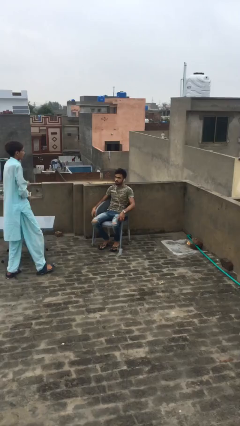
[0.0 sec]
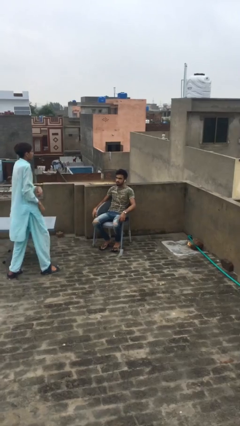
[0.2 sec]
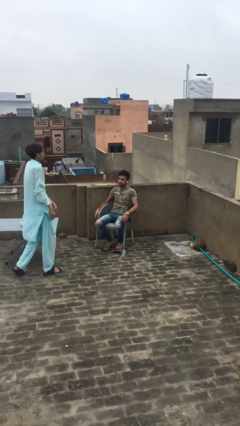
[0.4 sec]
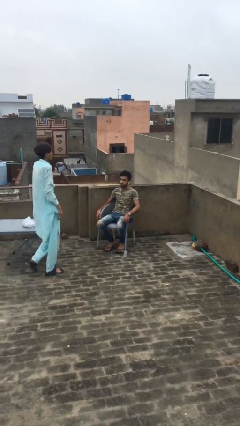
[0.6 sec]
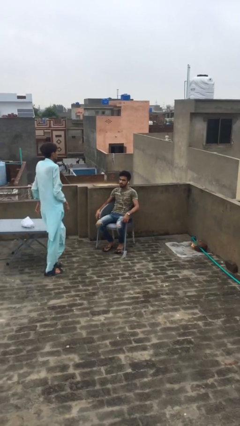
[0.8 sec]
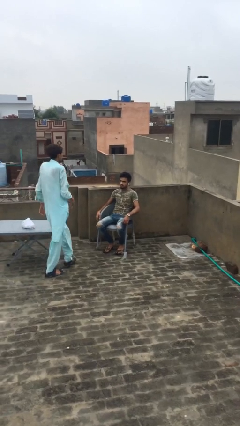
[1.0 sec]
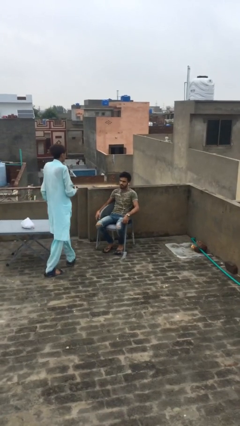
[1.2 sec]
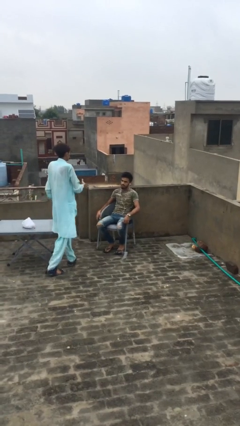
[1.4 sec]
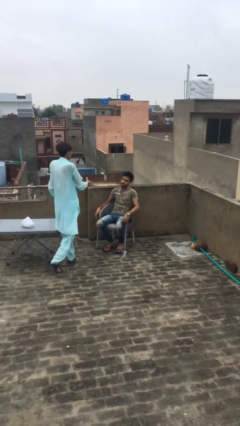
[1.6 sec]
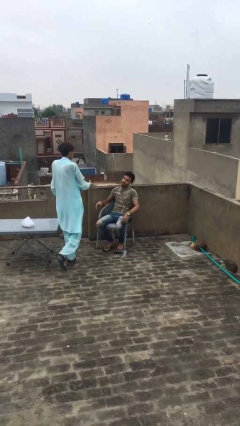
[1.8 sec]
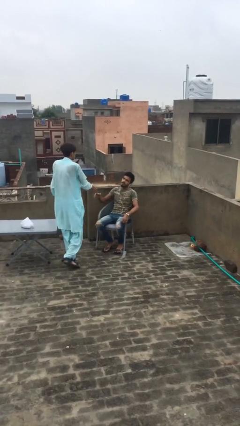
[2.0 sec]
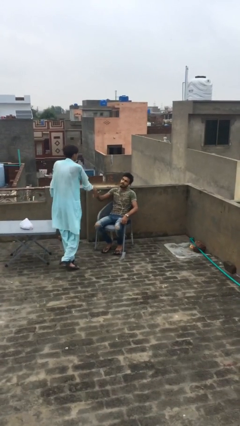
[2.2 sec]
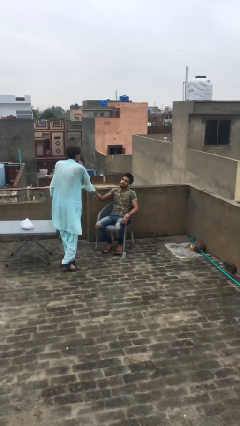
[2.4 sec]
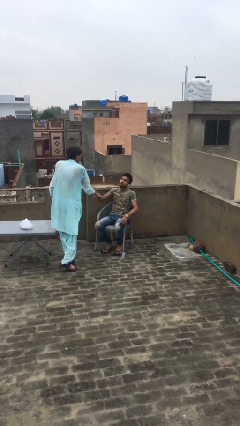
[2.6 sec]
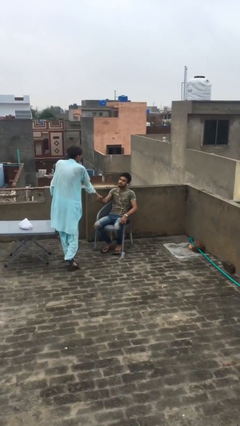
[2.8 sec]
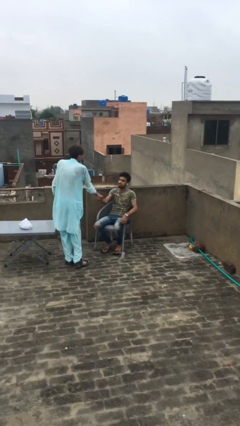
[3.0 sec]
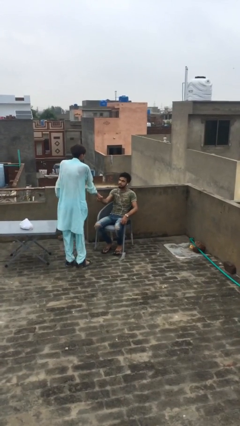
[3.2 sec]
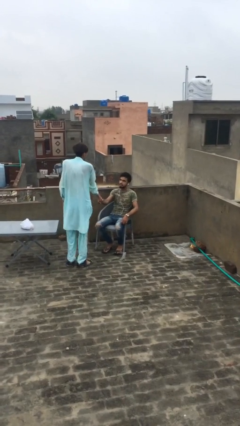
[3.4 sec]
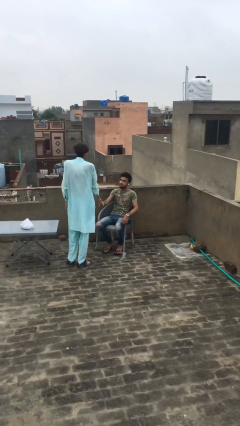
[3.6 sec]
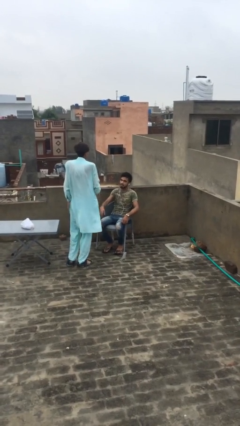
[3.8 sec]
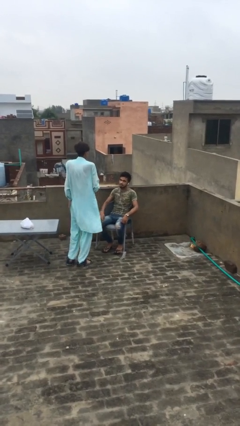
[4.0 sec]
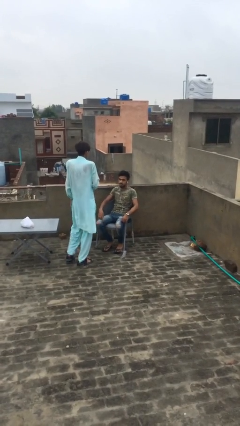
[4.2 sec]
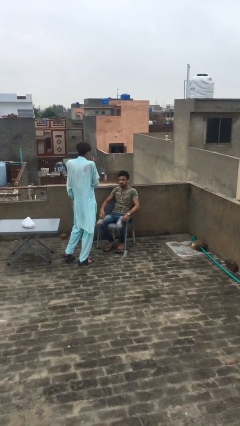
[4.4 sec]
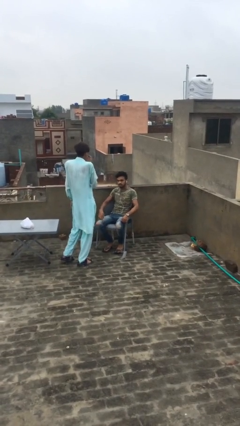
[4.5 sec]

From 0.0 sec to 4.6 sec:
person shakes hand

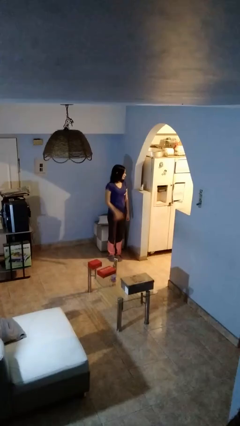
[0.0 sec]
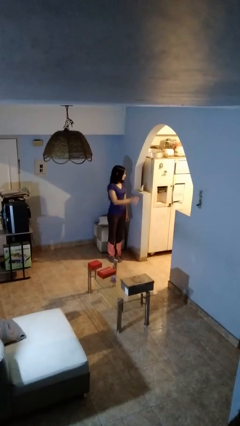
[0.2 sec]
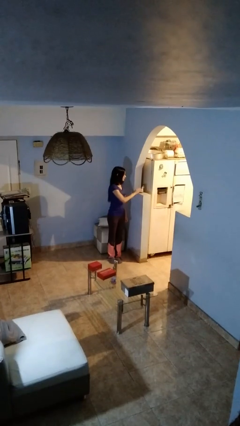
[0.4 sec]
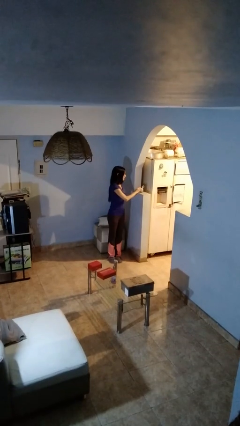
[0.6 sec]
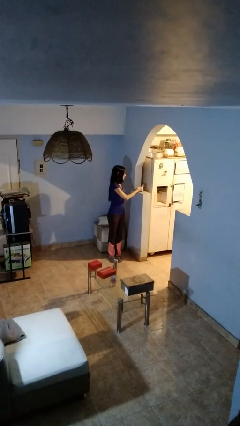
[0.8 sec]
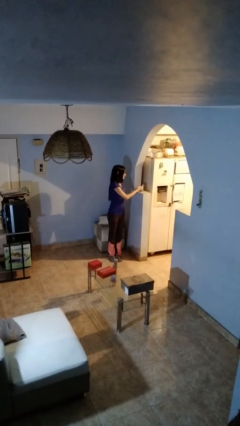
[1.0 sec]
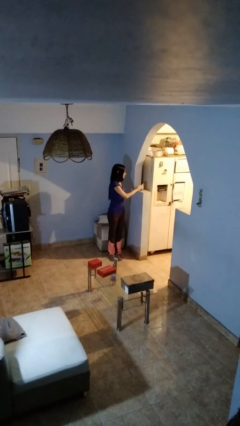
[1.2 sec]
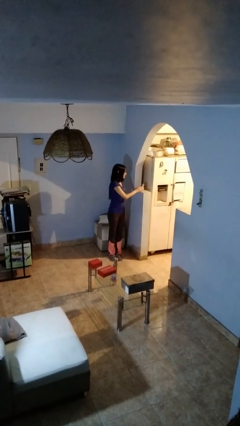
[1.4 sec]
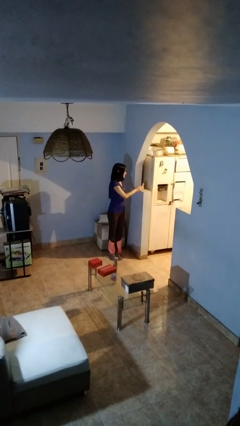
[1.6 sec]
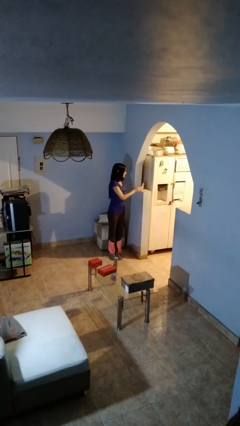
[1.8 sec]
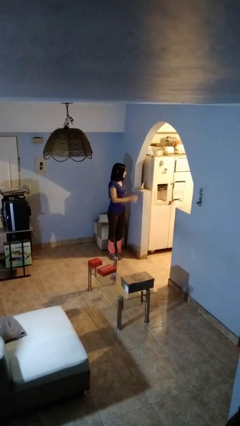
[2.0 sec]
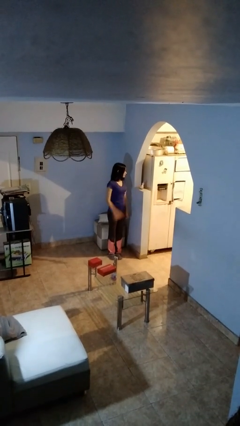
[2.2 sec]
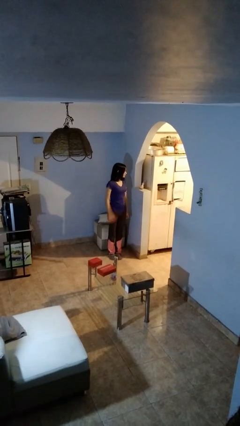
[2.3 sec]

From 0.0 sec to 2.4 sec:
person taps object with finger

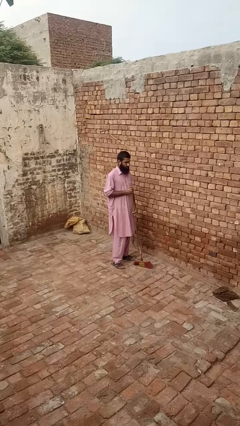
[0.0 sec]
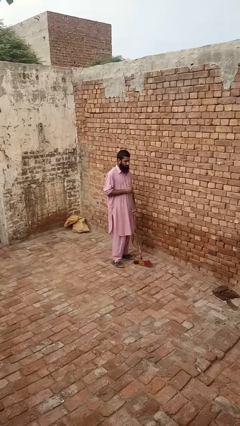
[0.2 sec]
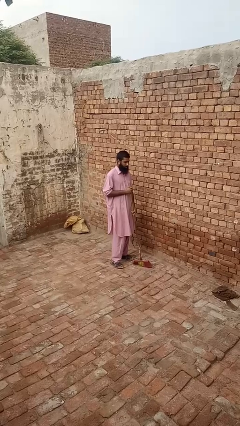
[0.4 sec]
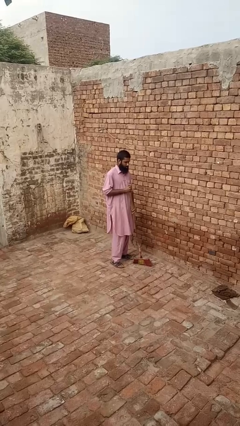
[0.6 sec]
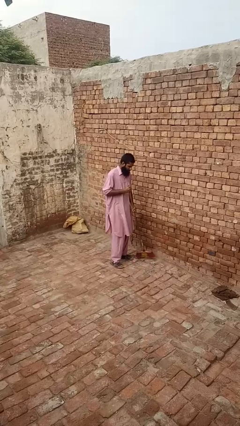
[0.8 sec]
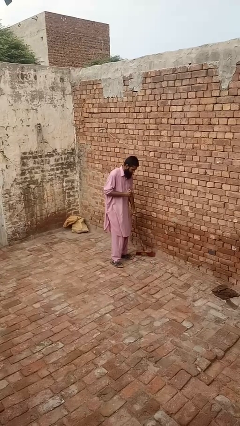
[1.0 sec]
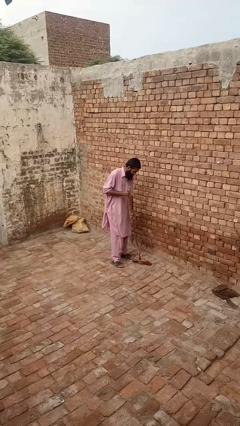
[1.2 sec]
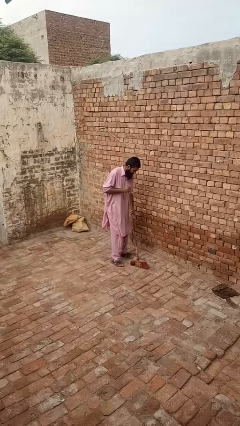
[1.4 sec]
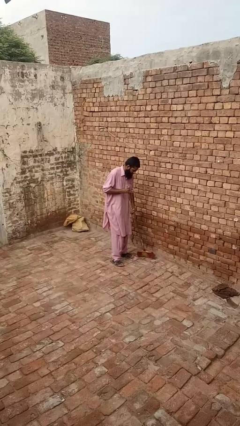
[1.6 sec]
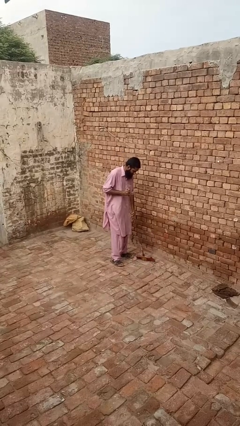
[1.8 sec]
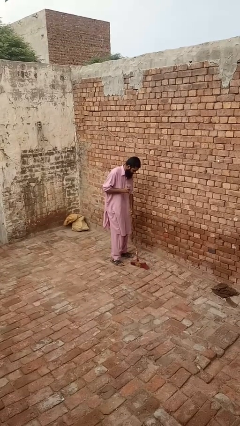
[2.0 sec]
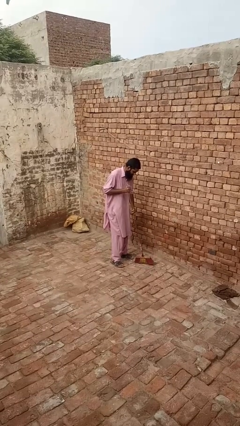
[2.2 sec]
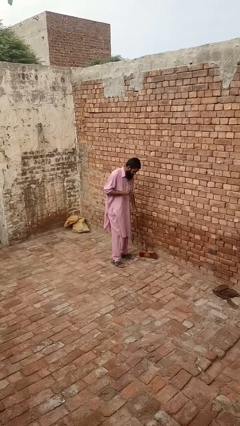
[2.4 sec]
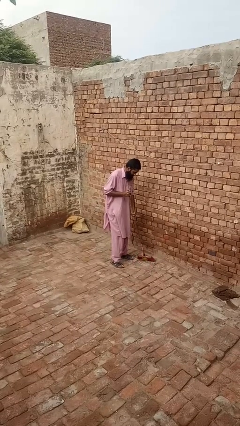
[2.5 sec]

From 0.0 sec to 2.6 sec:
person sweeps floor

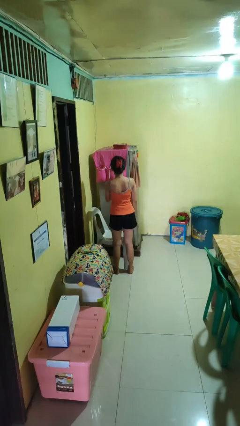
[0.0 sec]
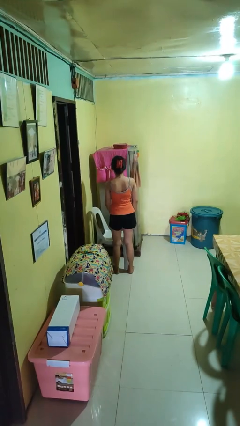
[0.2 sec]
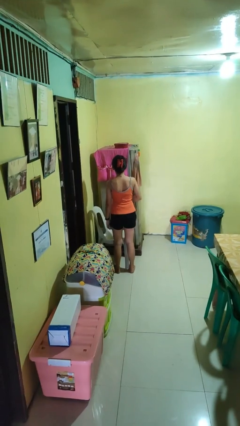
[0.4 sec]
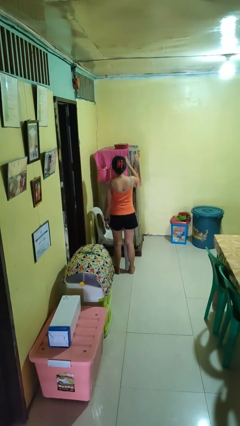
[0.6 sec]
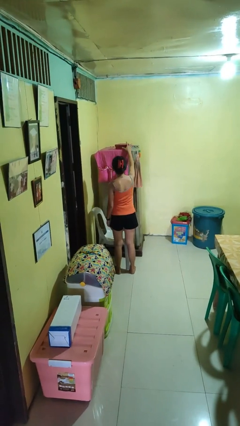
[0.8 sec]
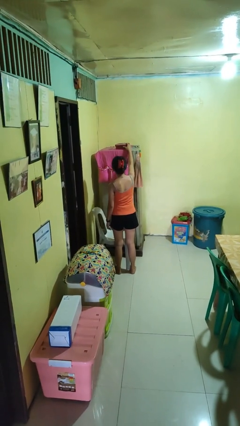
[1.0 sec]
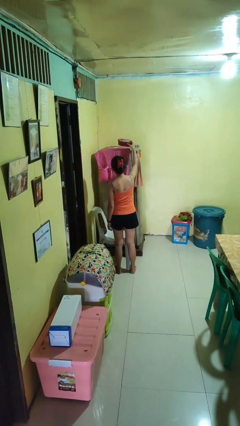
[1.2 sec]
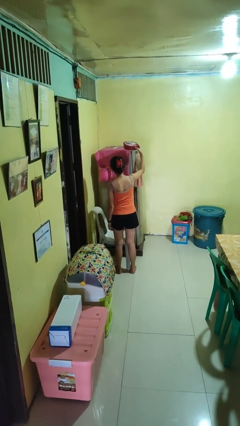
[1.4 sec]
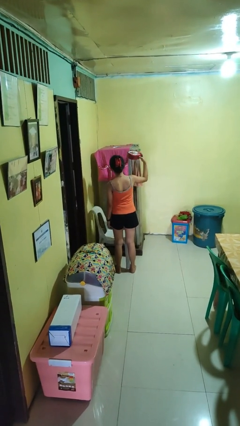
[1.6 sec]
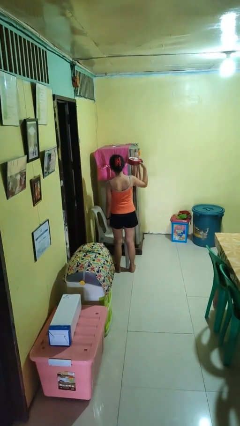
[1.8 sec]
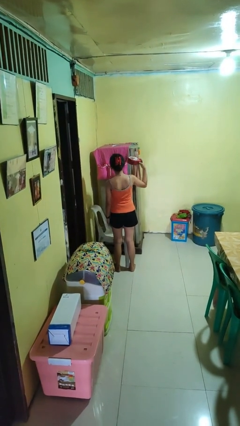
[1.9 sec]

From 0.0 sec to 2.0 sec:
person picks up object from shelf

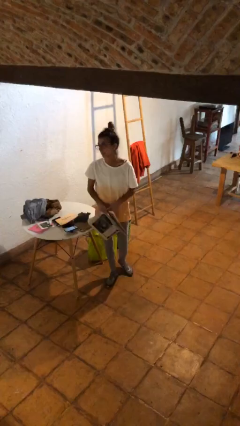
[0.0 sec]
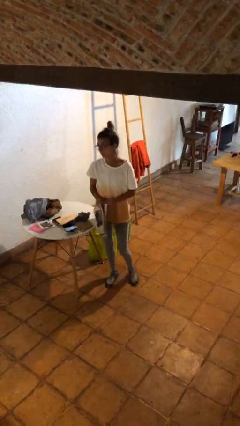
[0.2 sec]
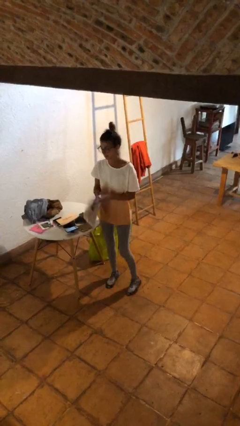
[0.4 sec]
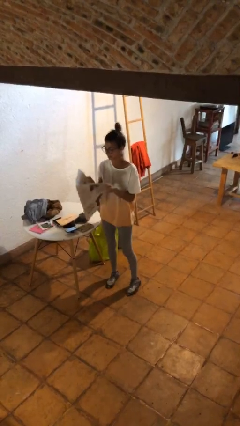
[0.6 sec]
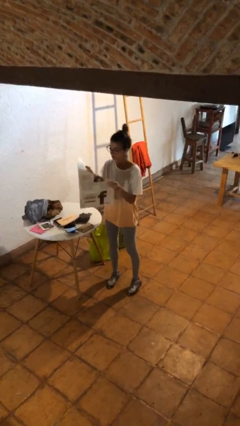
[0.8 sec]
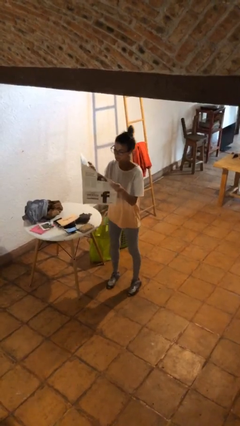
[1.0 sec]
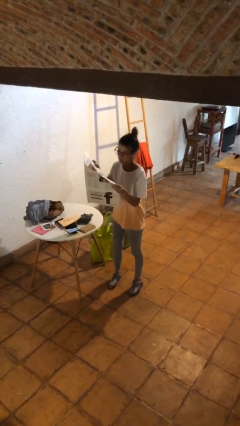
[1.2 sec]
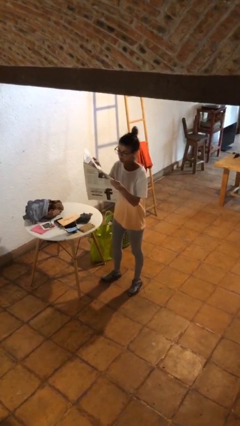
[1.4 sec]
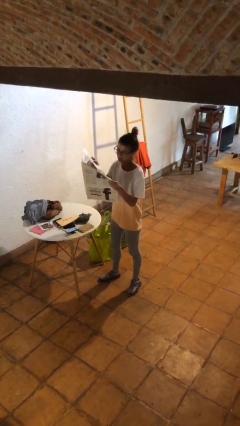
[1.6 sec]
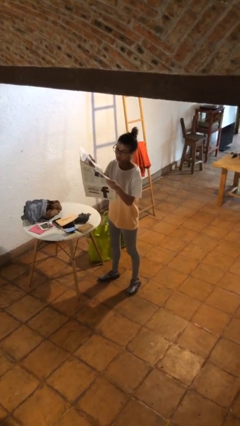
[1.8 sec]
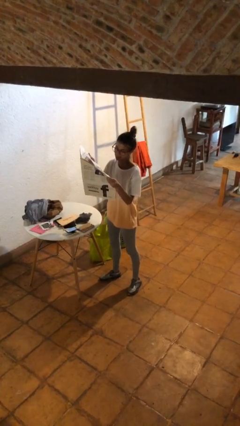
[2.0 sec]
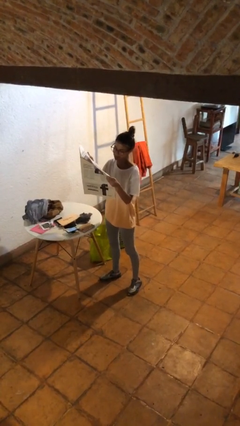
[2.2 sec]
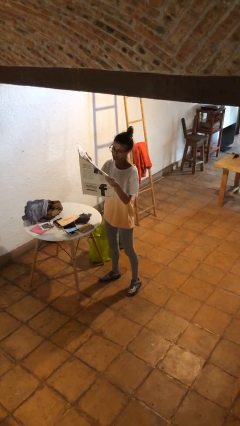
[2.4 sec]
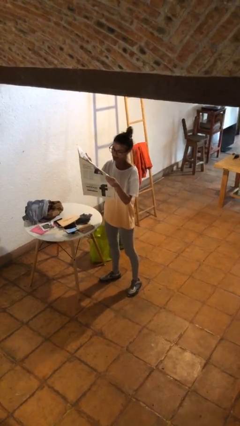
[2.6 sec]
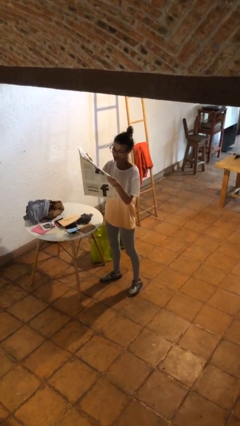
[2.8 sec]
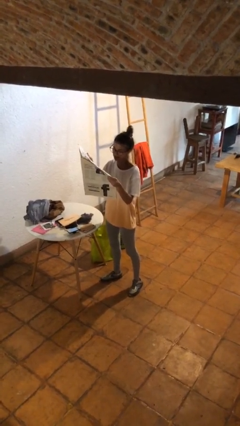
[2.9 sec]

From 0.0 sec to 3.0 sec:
person reads newspaper

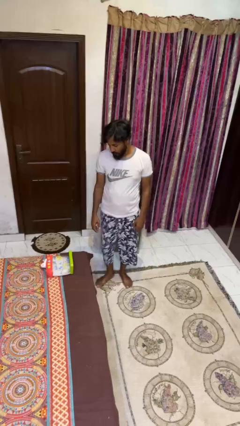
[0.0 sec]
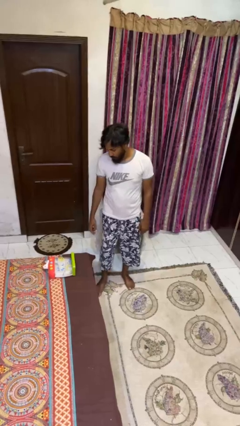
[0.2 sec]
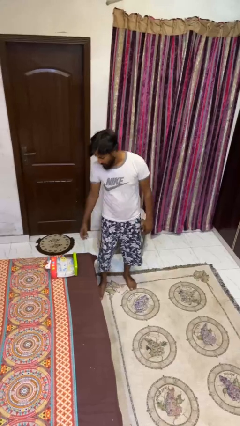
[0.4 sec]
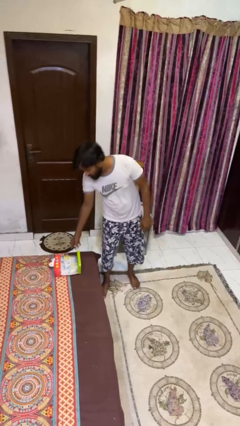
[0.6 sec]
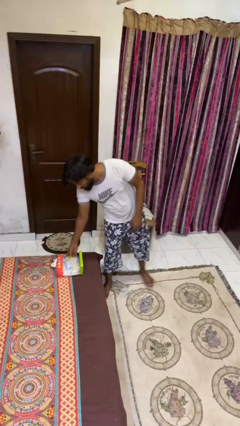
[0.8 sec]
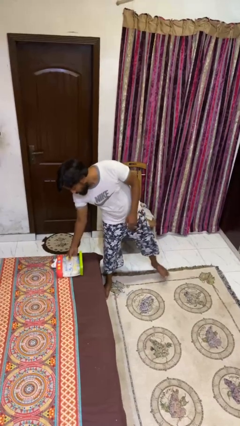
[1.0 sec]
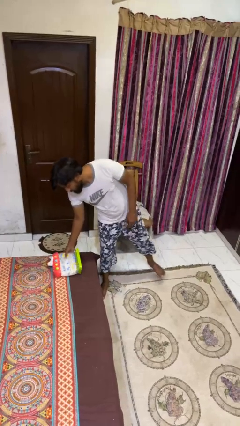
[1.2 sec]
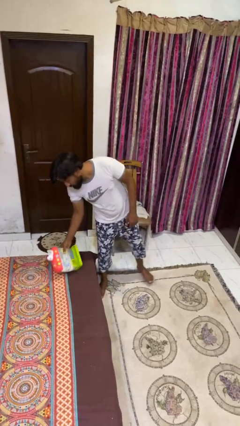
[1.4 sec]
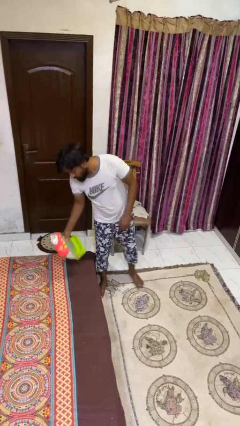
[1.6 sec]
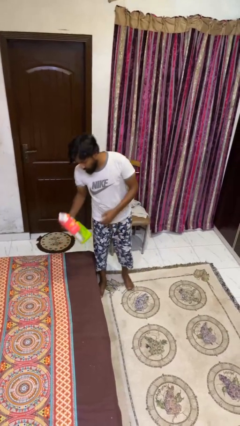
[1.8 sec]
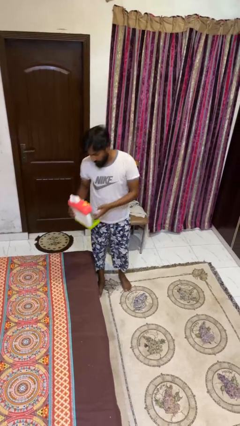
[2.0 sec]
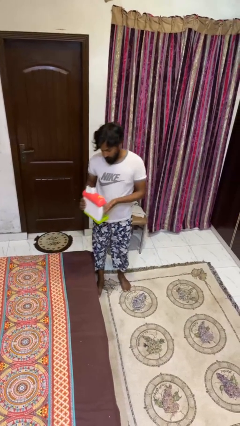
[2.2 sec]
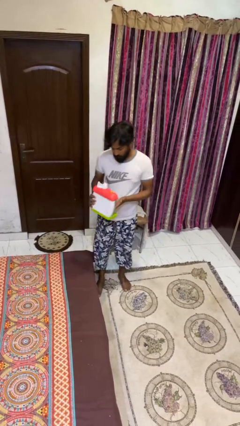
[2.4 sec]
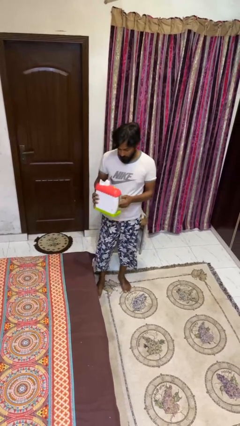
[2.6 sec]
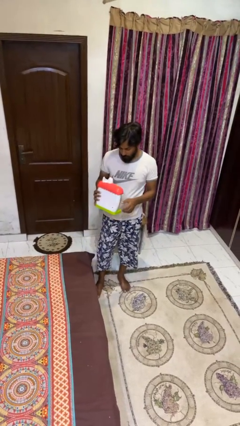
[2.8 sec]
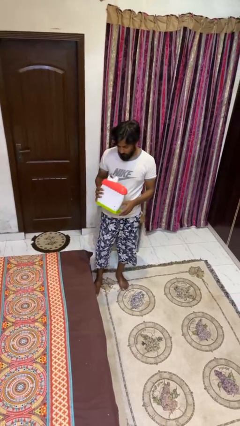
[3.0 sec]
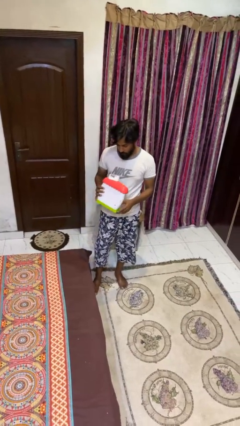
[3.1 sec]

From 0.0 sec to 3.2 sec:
person picks up object from bed
